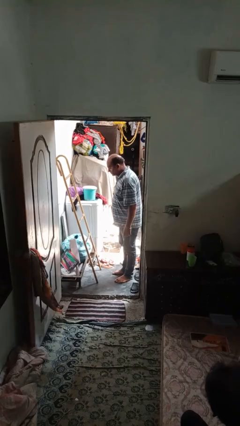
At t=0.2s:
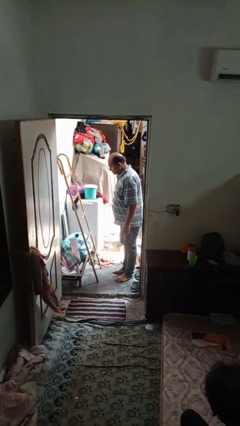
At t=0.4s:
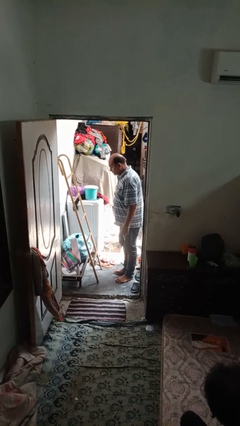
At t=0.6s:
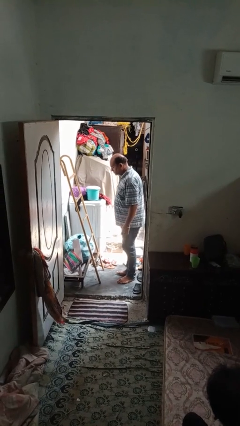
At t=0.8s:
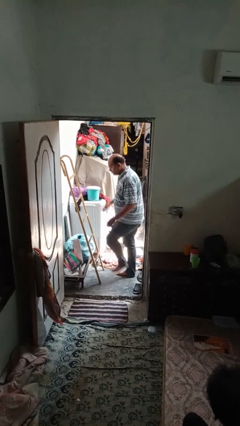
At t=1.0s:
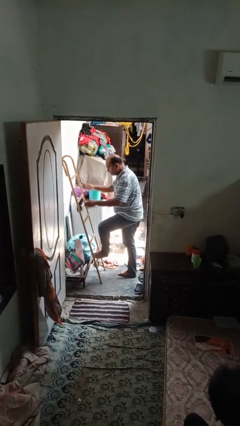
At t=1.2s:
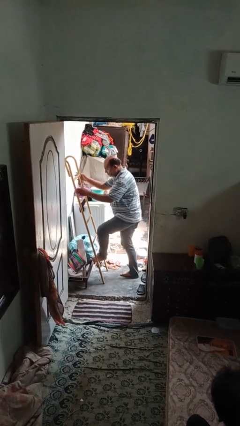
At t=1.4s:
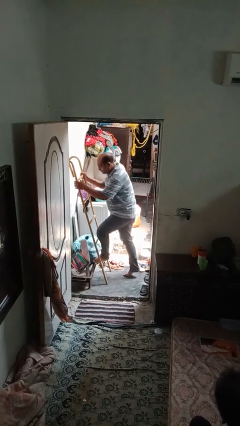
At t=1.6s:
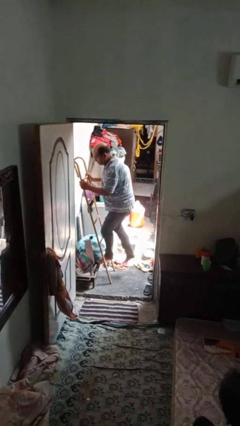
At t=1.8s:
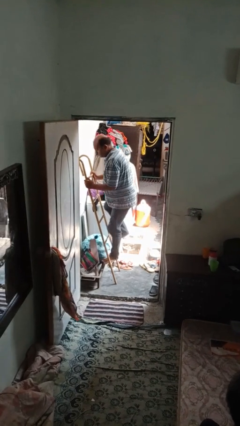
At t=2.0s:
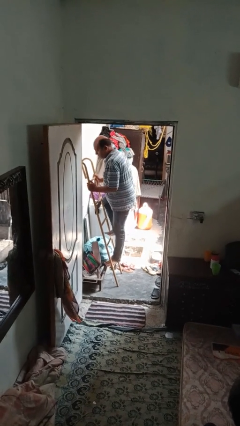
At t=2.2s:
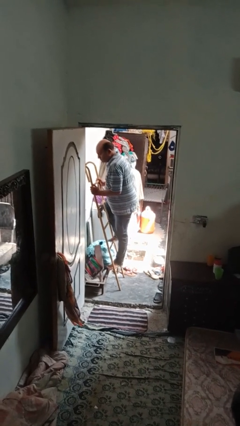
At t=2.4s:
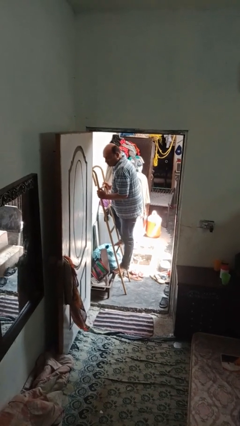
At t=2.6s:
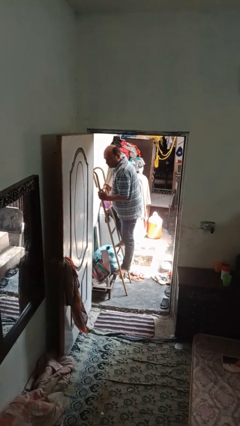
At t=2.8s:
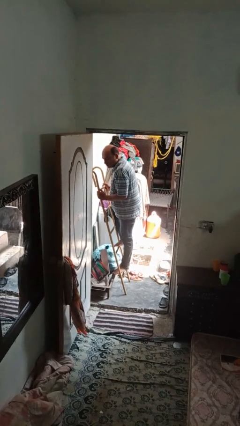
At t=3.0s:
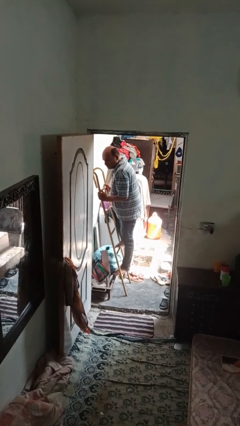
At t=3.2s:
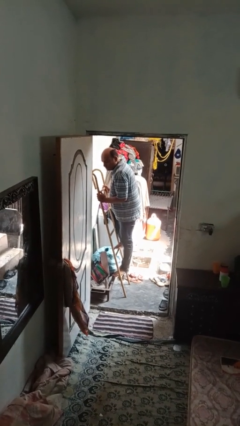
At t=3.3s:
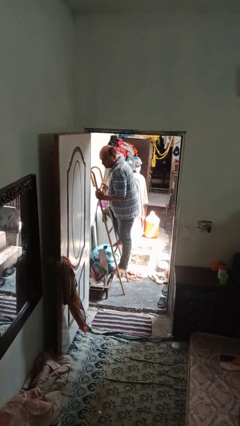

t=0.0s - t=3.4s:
person climbs up ladder

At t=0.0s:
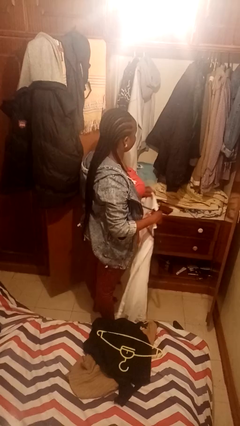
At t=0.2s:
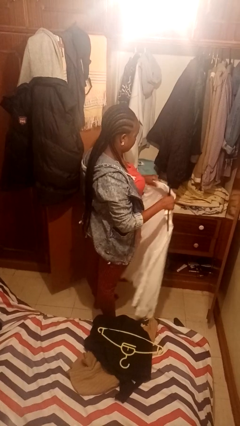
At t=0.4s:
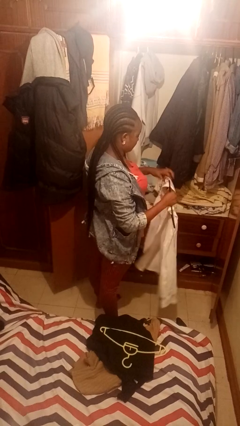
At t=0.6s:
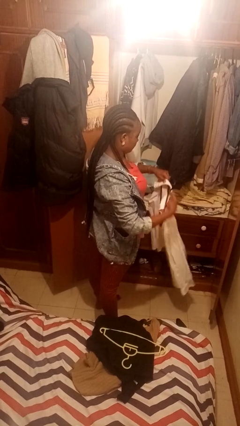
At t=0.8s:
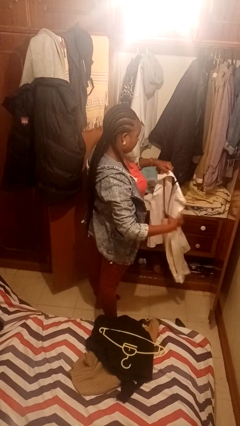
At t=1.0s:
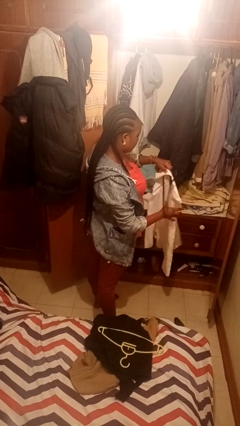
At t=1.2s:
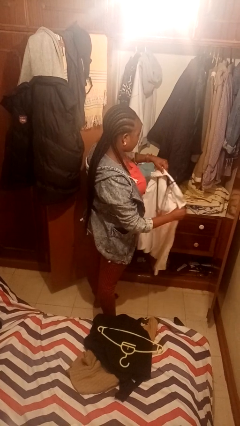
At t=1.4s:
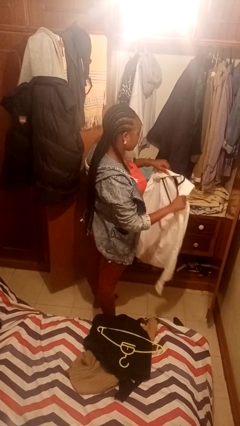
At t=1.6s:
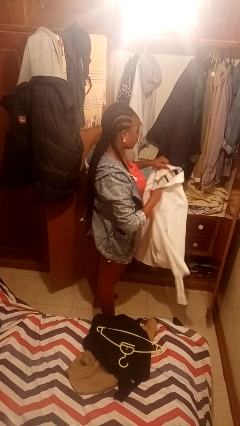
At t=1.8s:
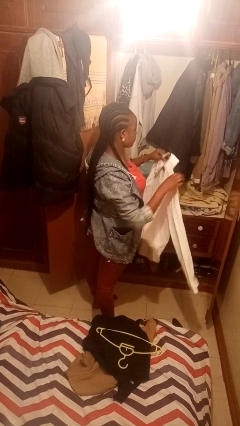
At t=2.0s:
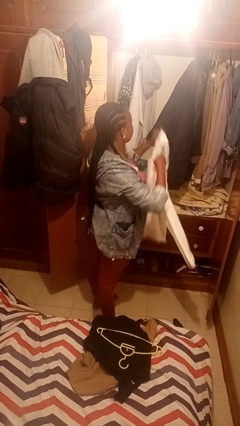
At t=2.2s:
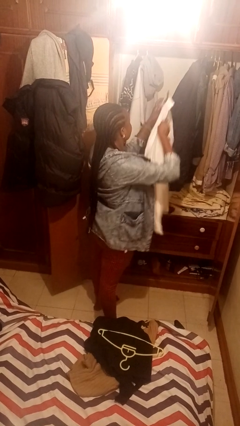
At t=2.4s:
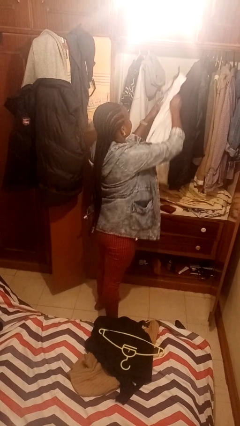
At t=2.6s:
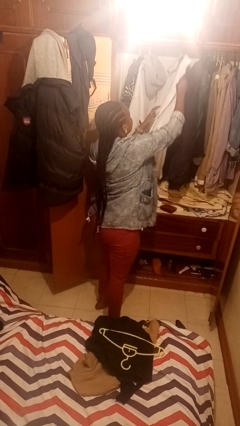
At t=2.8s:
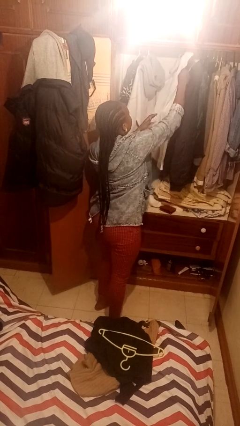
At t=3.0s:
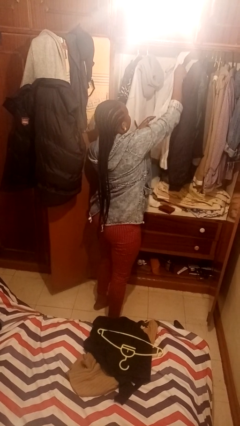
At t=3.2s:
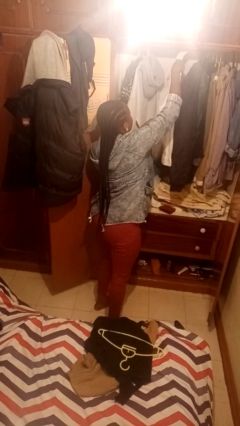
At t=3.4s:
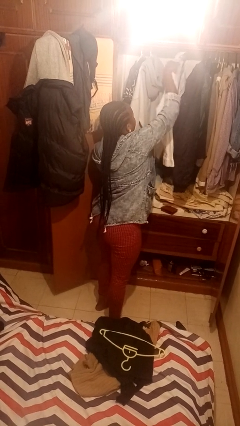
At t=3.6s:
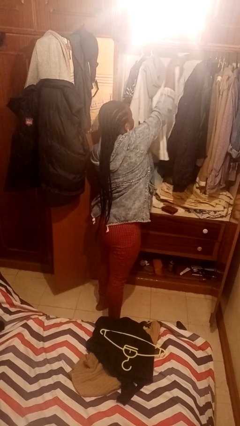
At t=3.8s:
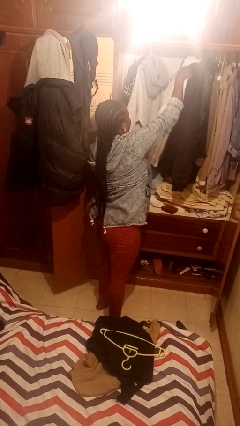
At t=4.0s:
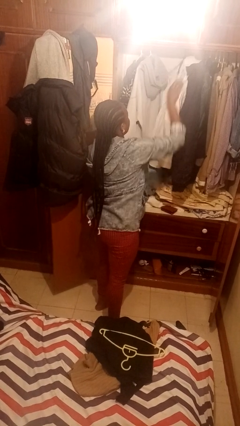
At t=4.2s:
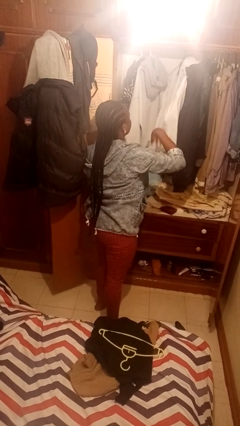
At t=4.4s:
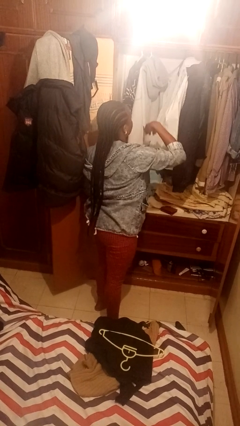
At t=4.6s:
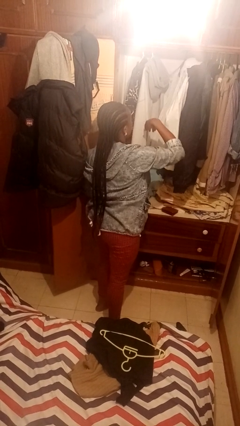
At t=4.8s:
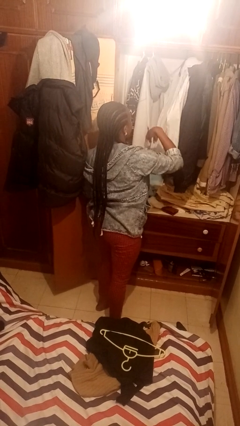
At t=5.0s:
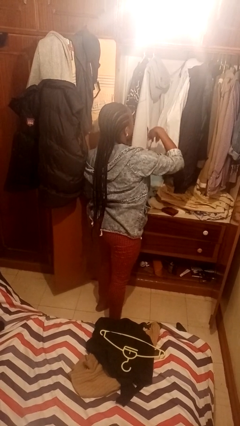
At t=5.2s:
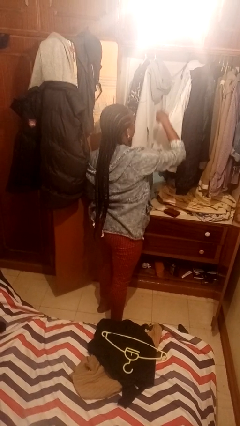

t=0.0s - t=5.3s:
person puts clothes into closet

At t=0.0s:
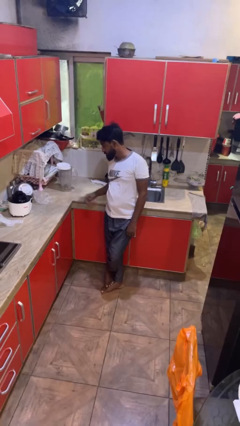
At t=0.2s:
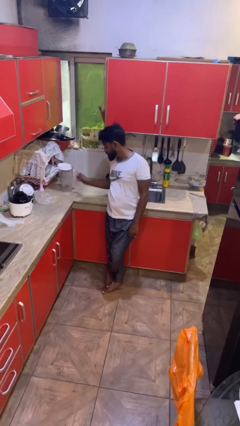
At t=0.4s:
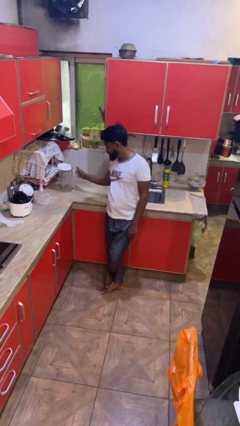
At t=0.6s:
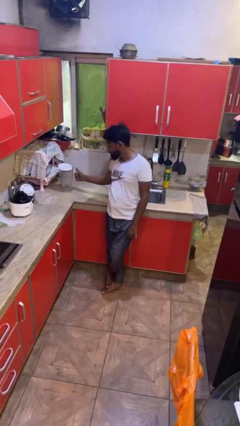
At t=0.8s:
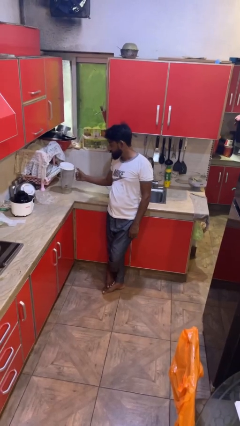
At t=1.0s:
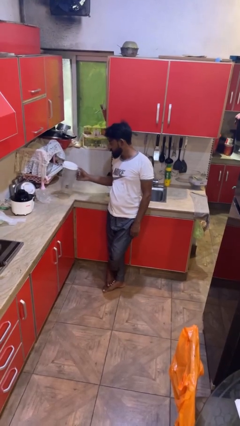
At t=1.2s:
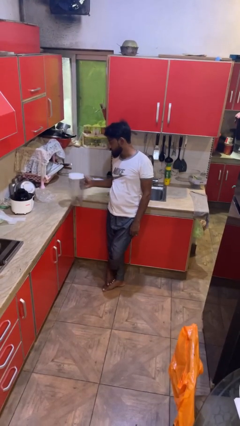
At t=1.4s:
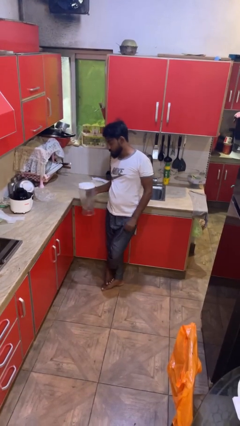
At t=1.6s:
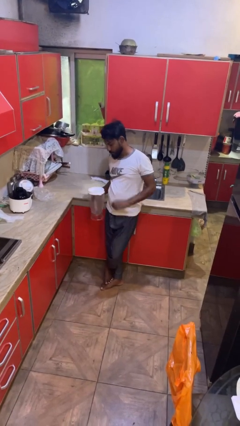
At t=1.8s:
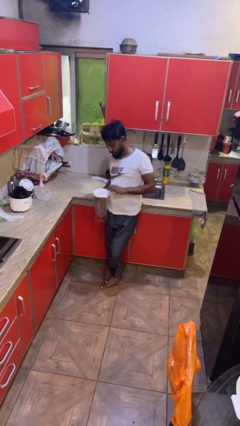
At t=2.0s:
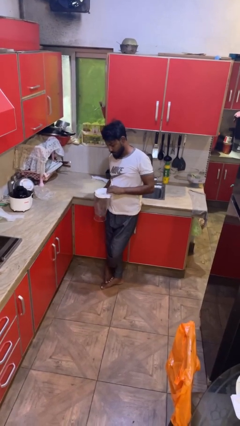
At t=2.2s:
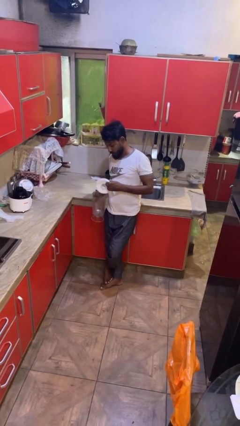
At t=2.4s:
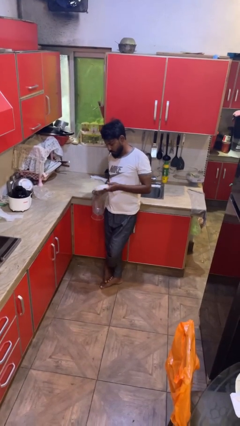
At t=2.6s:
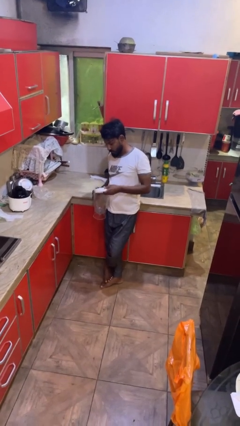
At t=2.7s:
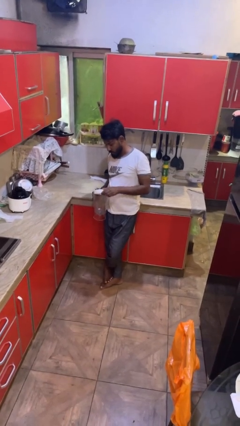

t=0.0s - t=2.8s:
person picks up object from countertop

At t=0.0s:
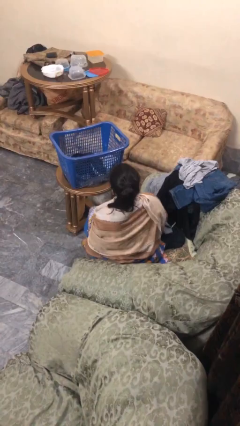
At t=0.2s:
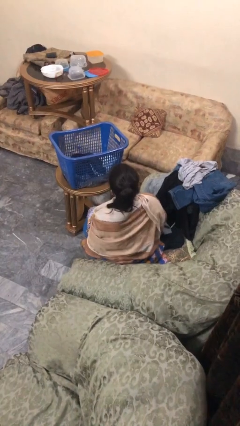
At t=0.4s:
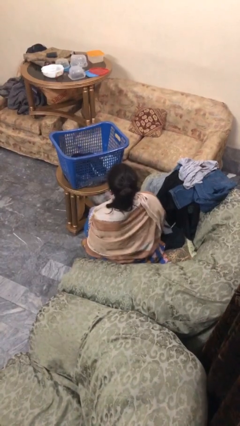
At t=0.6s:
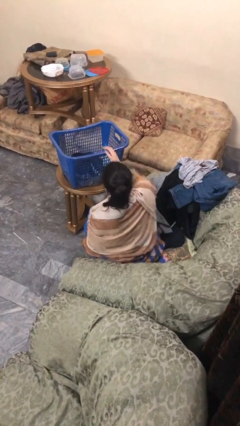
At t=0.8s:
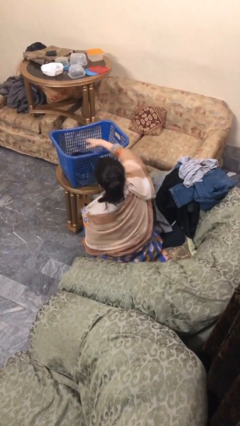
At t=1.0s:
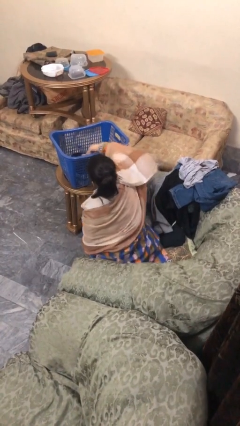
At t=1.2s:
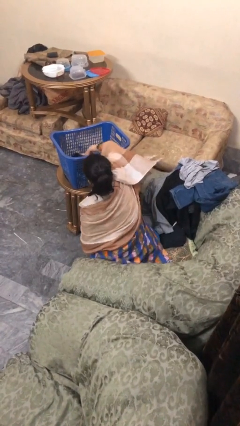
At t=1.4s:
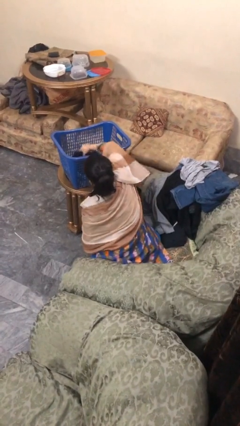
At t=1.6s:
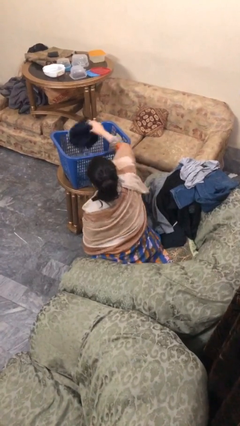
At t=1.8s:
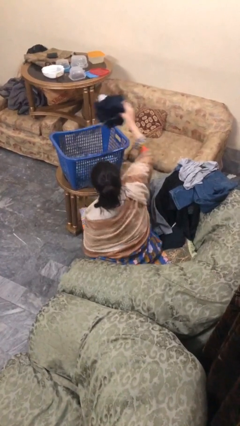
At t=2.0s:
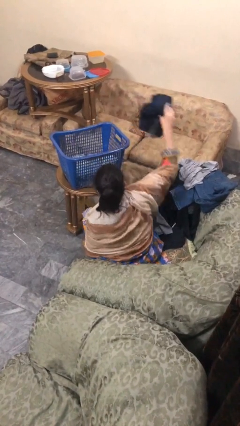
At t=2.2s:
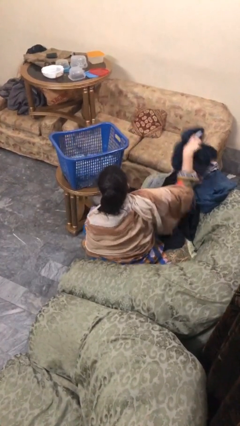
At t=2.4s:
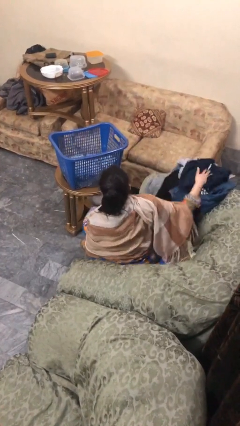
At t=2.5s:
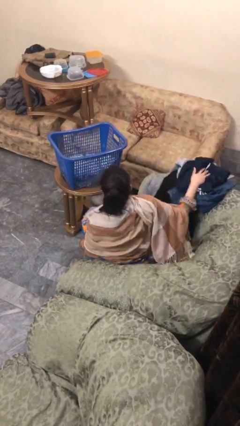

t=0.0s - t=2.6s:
person takes object from basket

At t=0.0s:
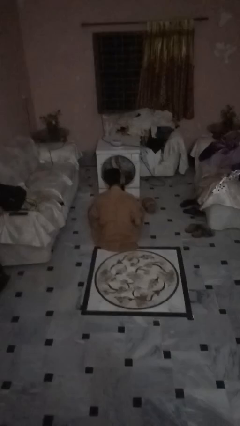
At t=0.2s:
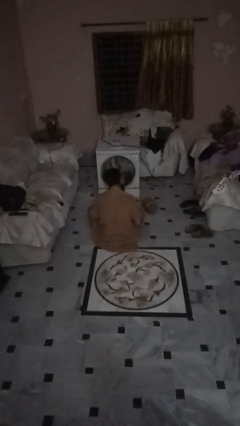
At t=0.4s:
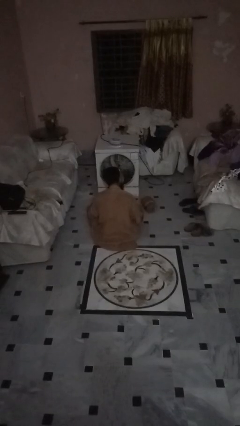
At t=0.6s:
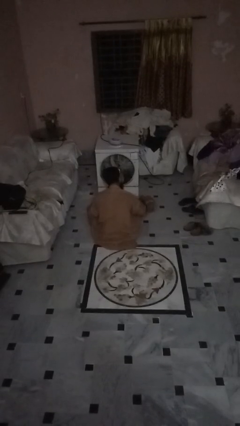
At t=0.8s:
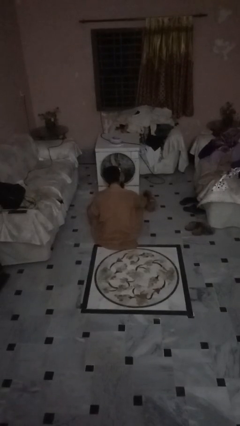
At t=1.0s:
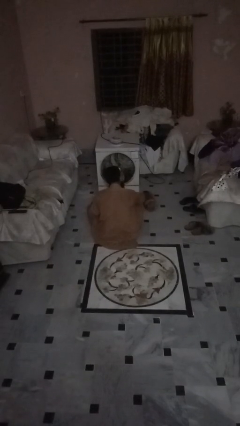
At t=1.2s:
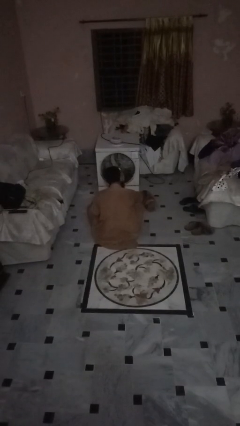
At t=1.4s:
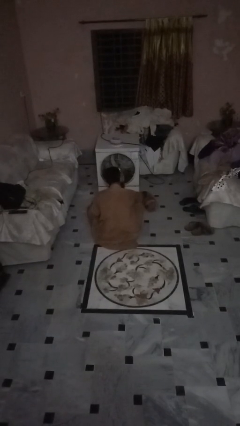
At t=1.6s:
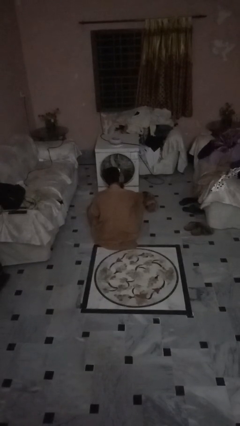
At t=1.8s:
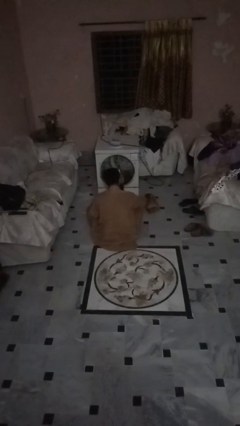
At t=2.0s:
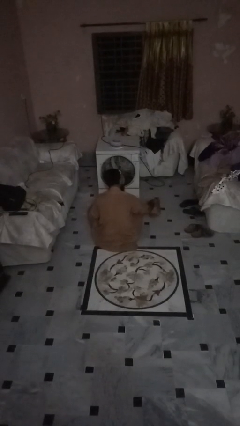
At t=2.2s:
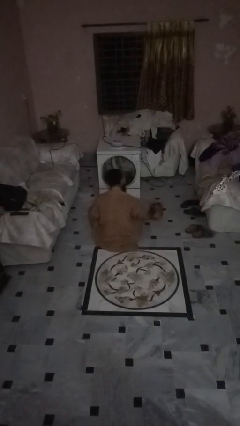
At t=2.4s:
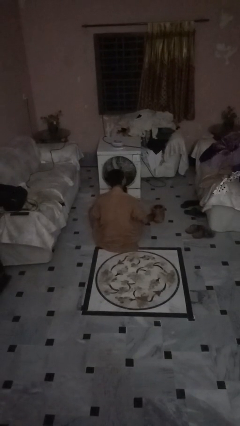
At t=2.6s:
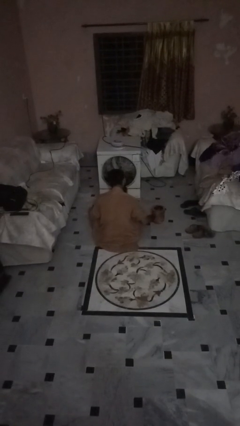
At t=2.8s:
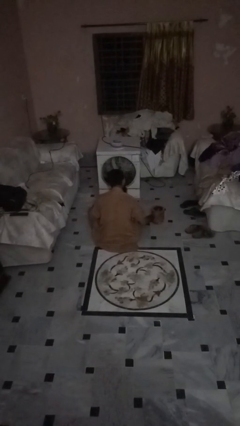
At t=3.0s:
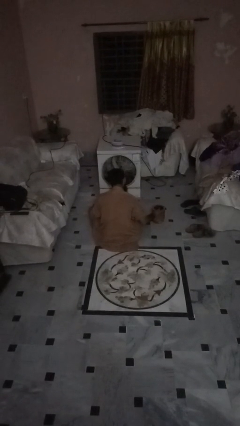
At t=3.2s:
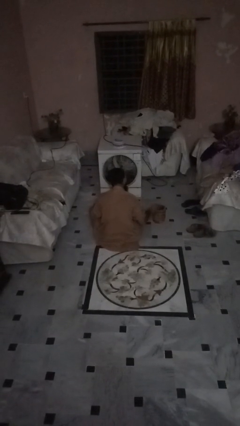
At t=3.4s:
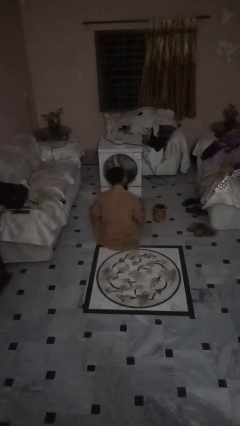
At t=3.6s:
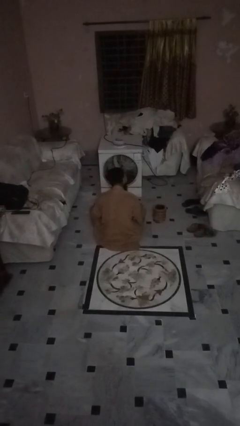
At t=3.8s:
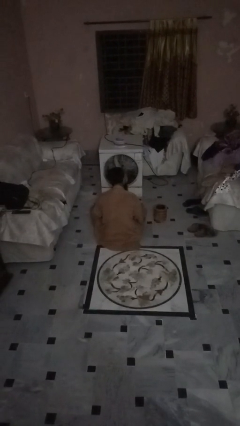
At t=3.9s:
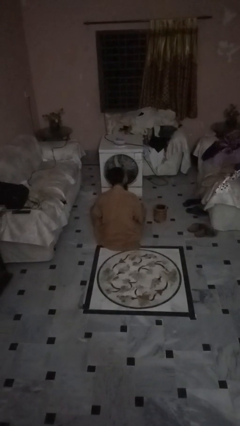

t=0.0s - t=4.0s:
person sets upright furniture
